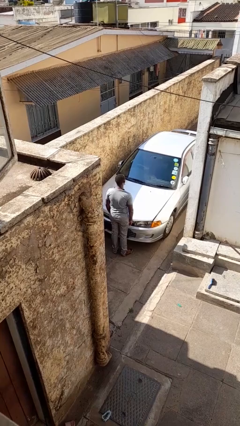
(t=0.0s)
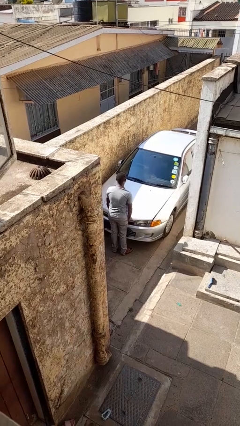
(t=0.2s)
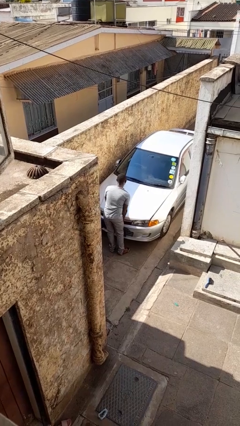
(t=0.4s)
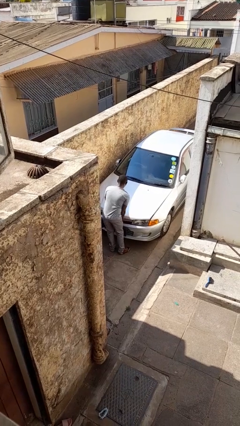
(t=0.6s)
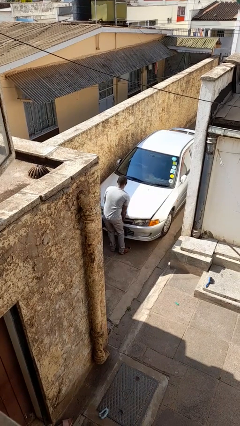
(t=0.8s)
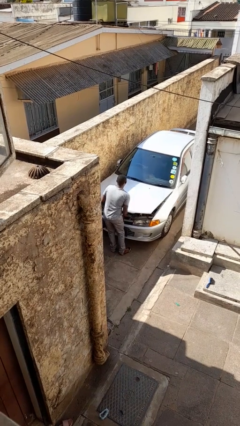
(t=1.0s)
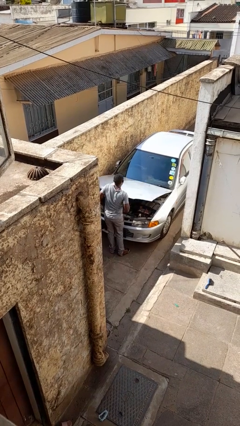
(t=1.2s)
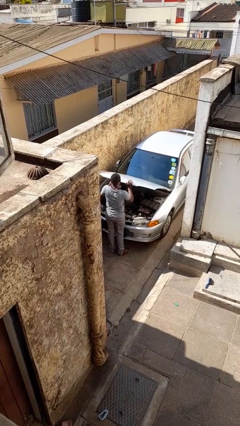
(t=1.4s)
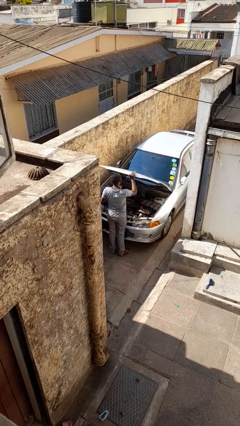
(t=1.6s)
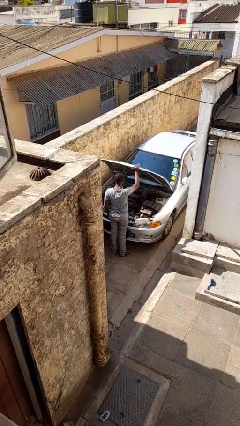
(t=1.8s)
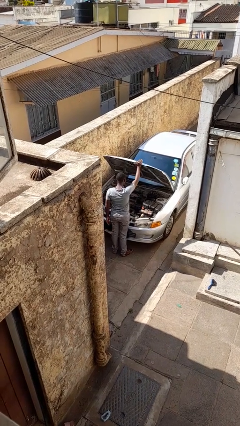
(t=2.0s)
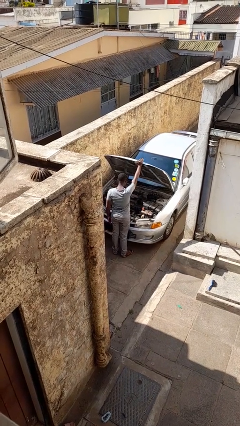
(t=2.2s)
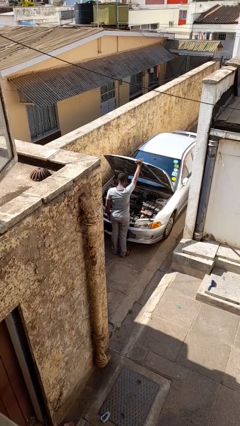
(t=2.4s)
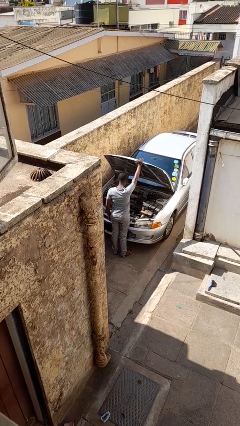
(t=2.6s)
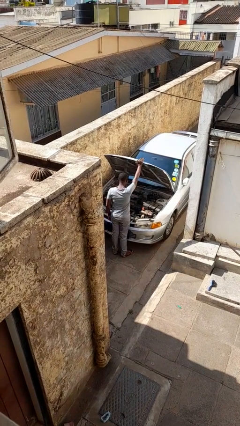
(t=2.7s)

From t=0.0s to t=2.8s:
person opens car hood

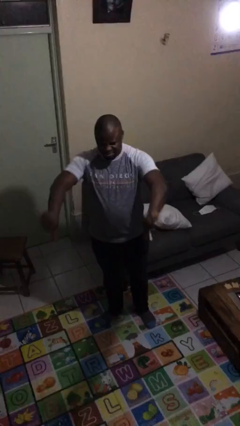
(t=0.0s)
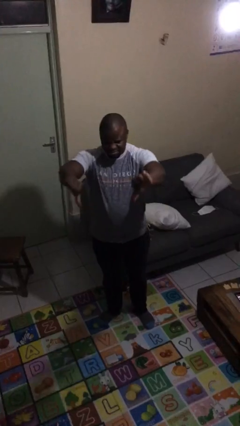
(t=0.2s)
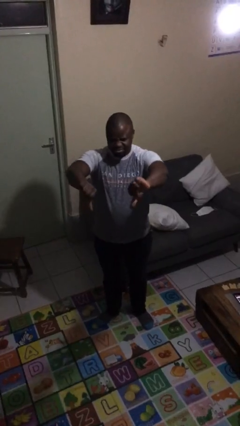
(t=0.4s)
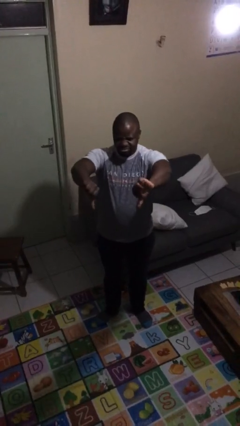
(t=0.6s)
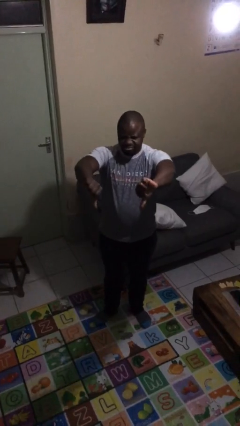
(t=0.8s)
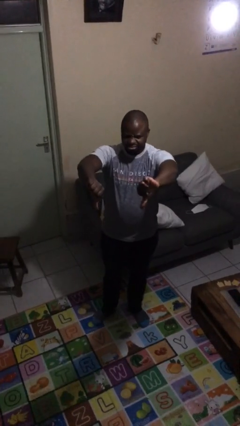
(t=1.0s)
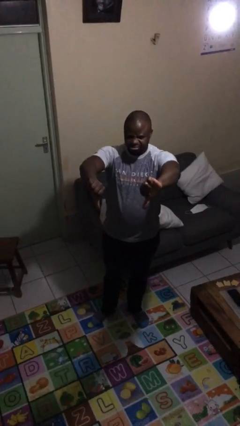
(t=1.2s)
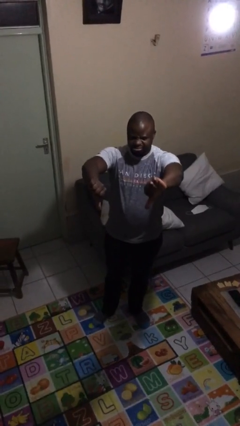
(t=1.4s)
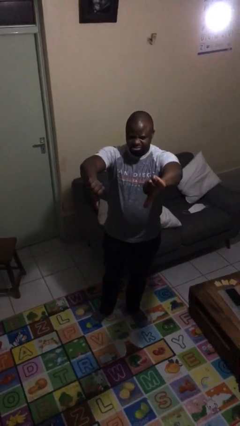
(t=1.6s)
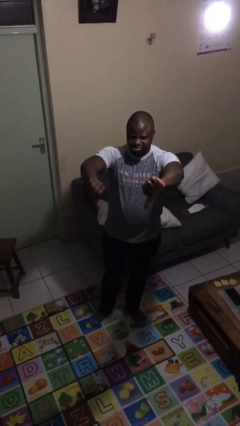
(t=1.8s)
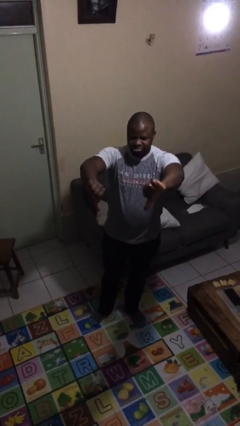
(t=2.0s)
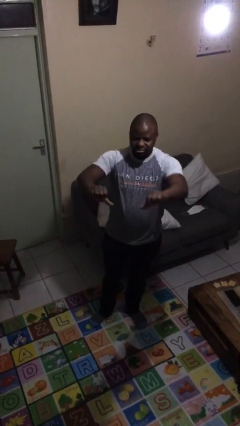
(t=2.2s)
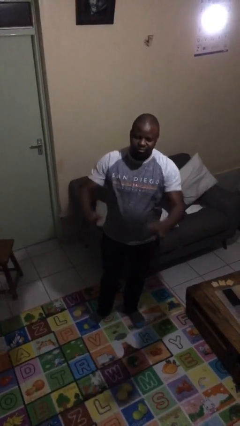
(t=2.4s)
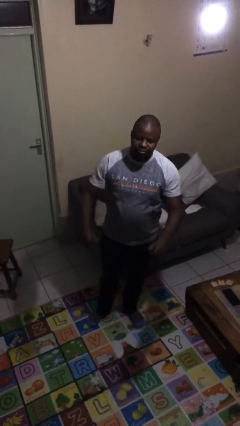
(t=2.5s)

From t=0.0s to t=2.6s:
person gestures thumbs down

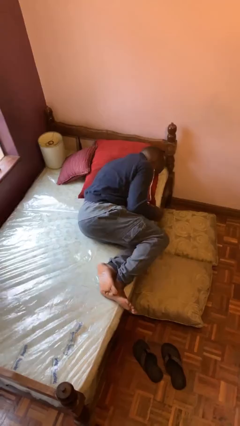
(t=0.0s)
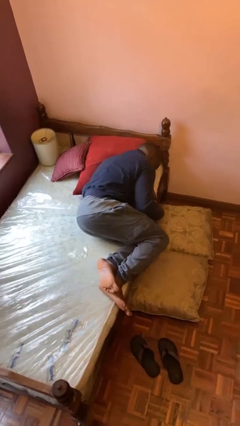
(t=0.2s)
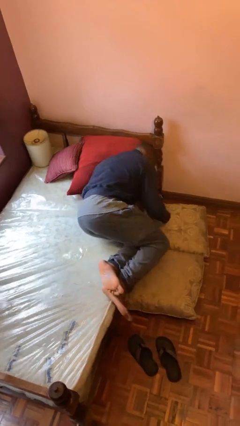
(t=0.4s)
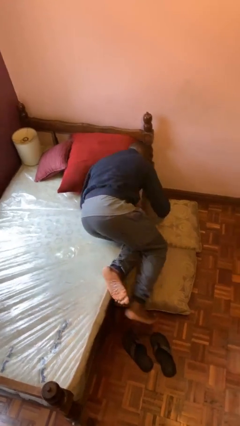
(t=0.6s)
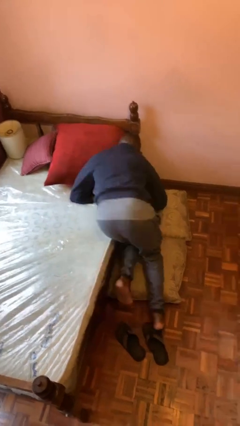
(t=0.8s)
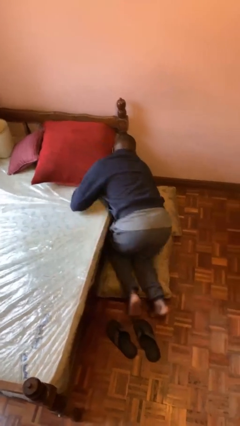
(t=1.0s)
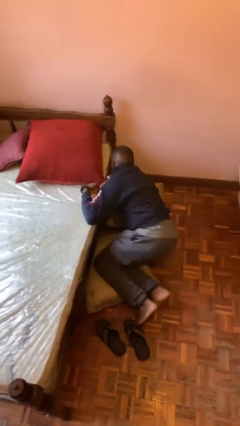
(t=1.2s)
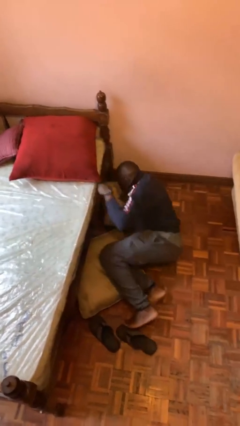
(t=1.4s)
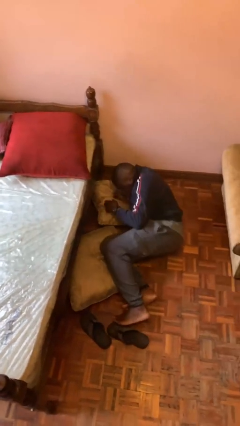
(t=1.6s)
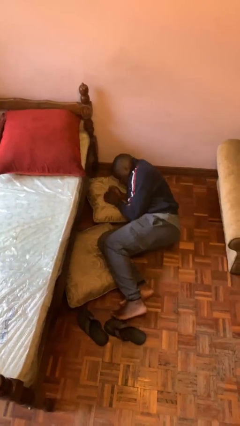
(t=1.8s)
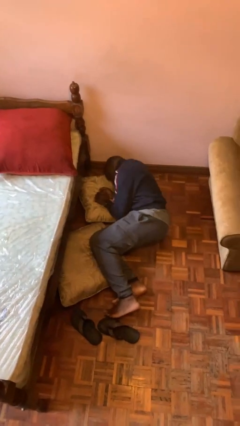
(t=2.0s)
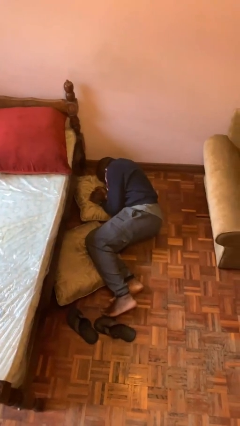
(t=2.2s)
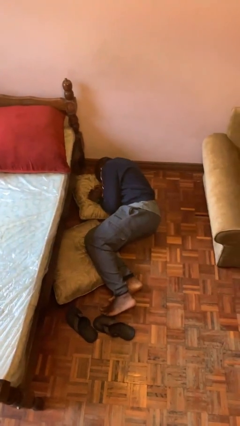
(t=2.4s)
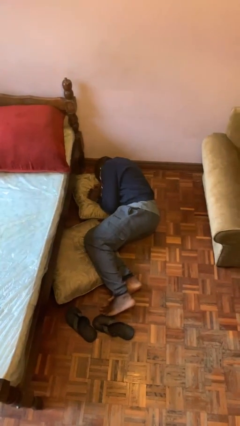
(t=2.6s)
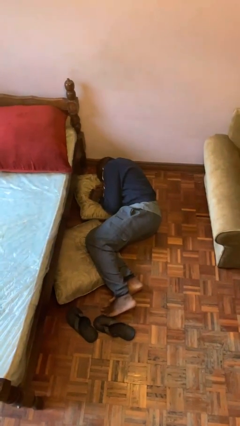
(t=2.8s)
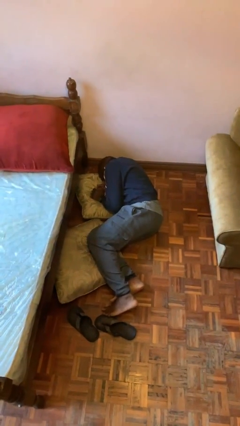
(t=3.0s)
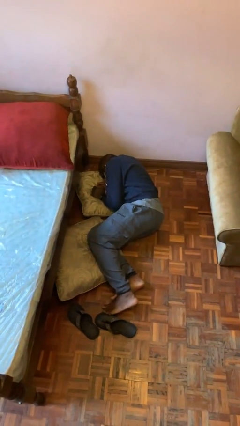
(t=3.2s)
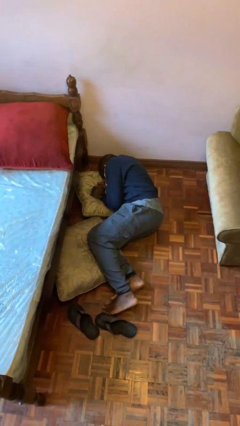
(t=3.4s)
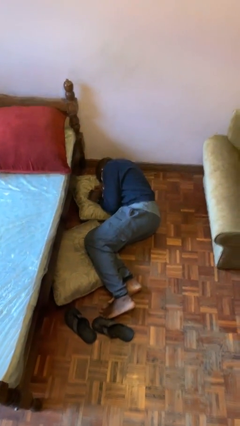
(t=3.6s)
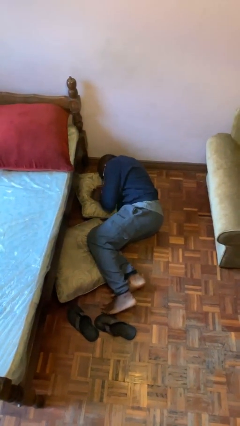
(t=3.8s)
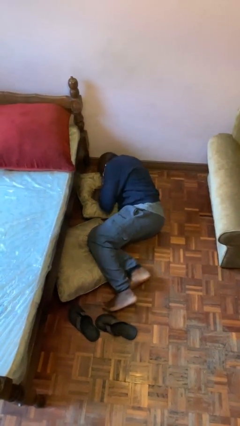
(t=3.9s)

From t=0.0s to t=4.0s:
person falls from bed

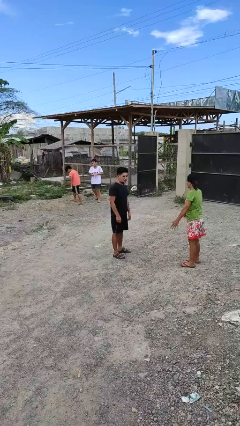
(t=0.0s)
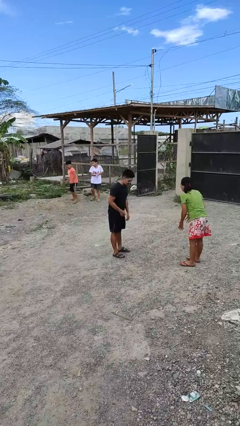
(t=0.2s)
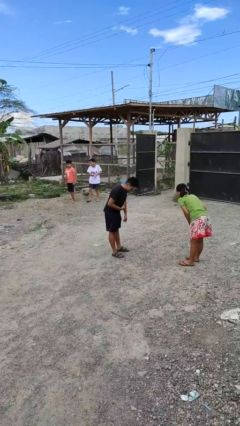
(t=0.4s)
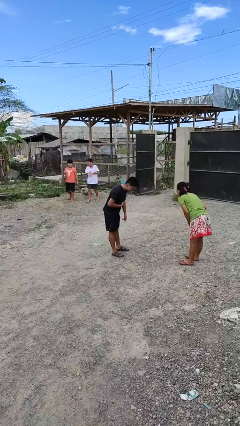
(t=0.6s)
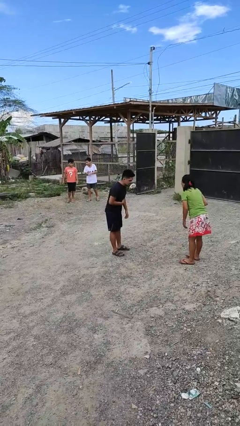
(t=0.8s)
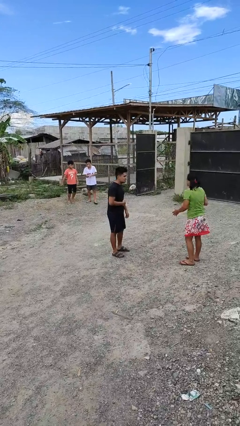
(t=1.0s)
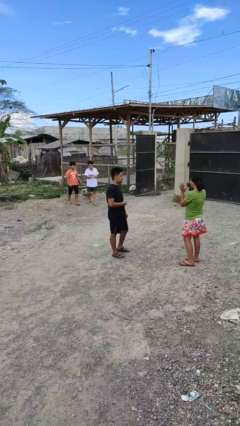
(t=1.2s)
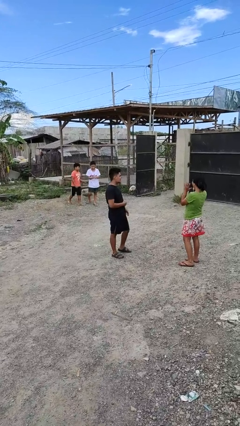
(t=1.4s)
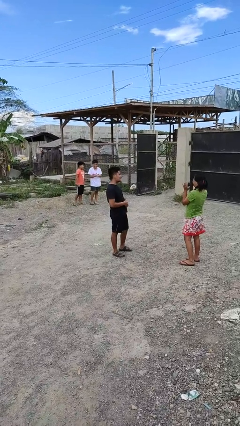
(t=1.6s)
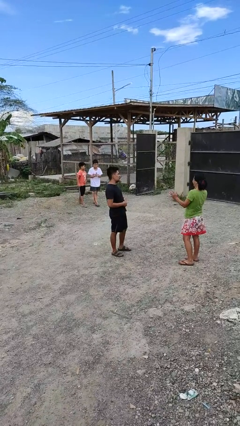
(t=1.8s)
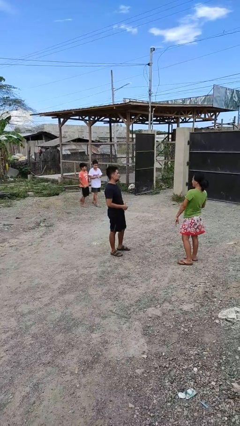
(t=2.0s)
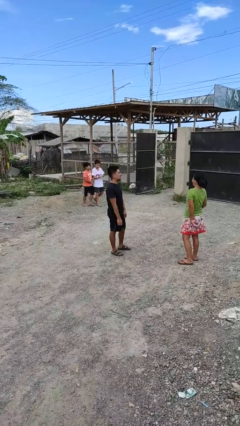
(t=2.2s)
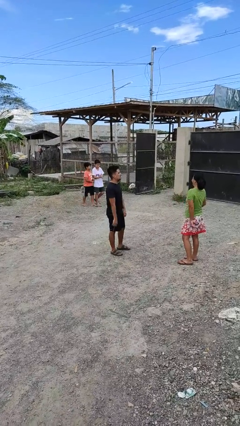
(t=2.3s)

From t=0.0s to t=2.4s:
person laughs with person

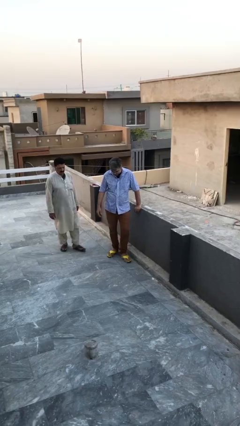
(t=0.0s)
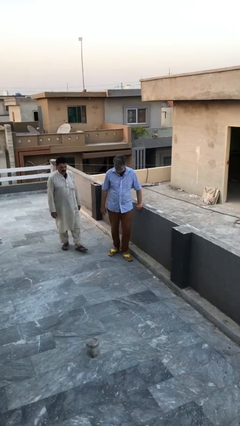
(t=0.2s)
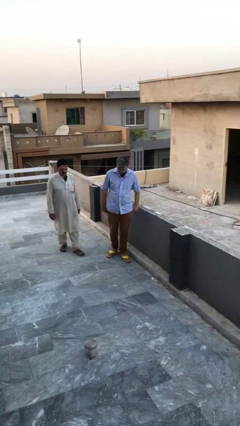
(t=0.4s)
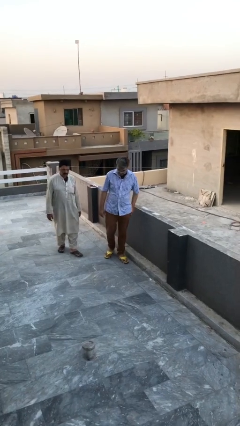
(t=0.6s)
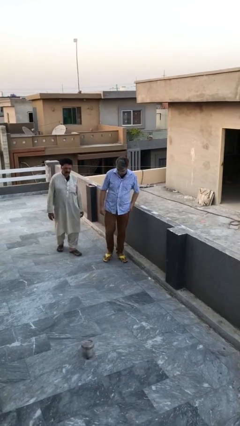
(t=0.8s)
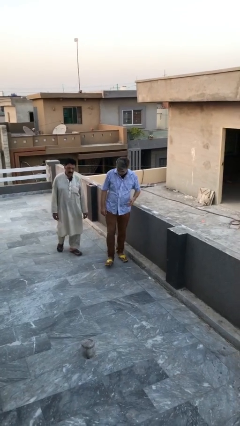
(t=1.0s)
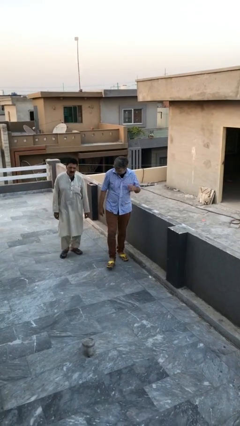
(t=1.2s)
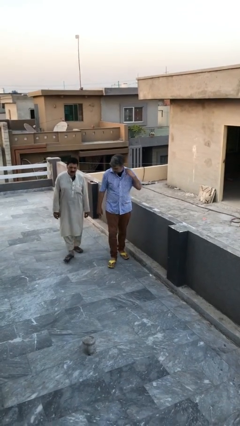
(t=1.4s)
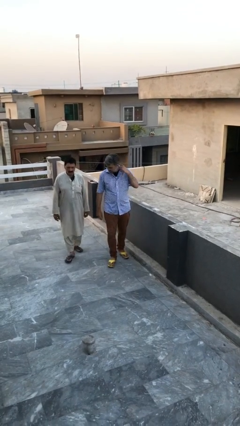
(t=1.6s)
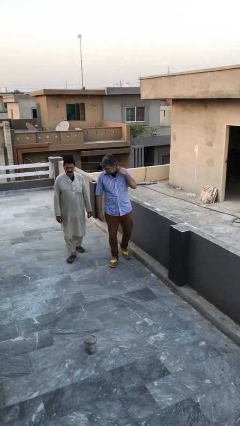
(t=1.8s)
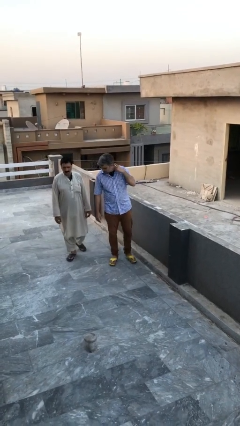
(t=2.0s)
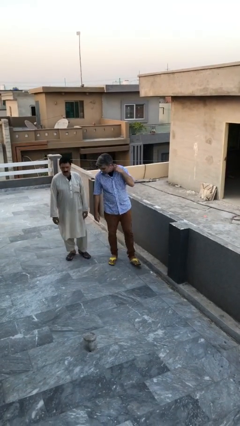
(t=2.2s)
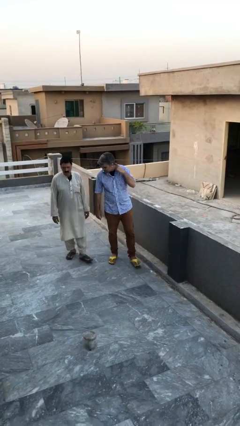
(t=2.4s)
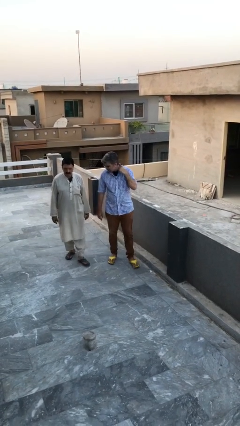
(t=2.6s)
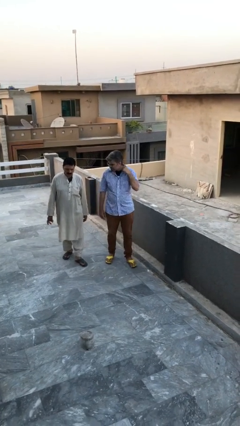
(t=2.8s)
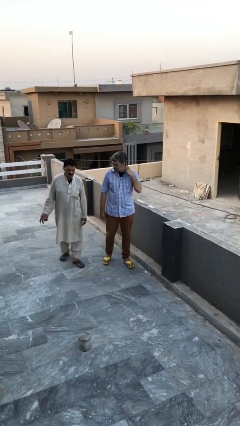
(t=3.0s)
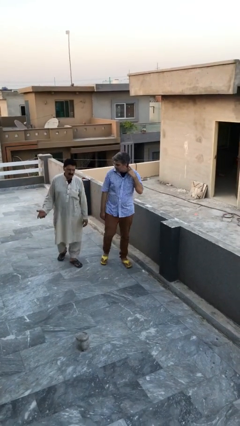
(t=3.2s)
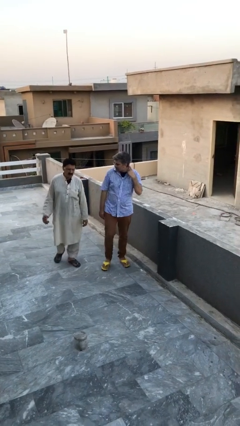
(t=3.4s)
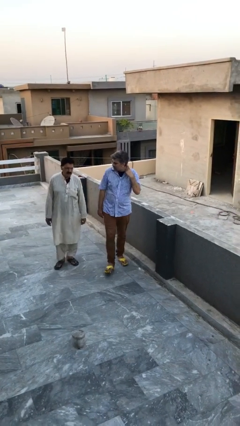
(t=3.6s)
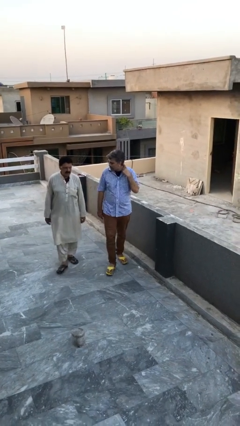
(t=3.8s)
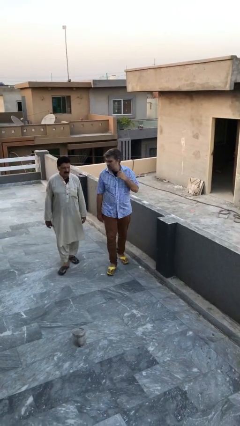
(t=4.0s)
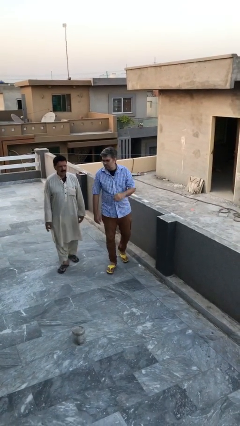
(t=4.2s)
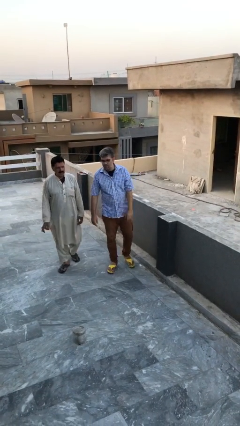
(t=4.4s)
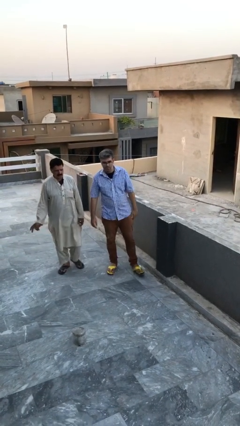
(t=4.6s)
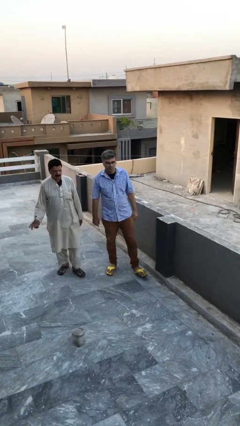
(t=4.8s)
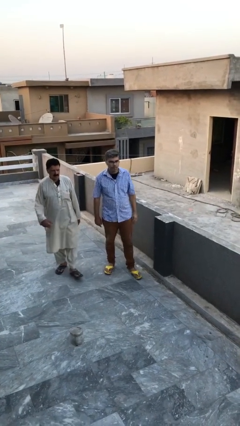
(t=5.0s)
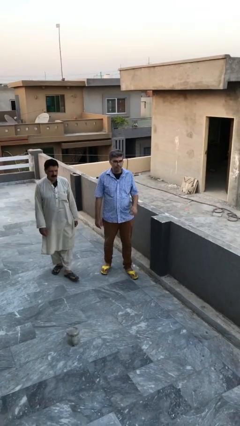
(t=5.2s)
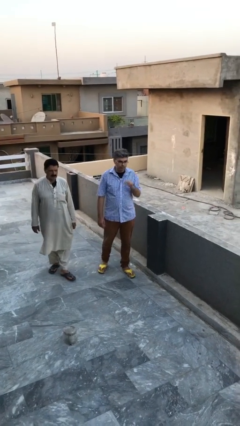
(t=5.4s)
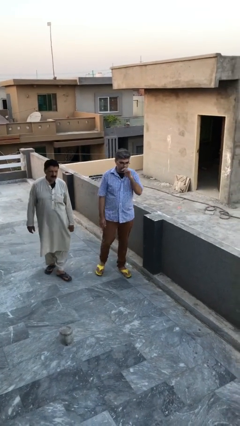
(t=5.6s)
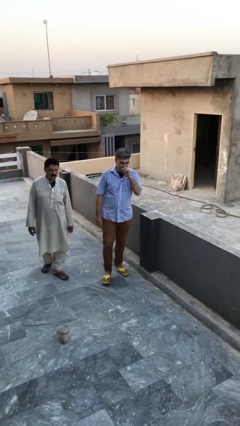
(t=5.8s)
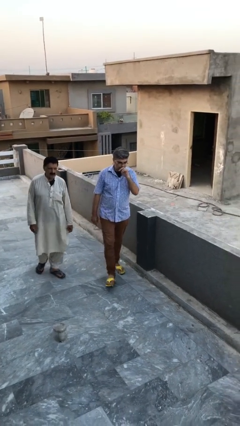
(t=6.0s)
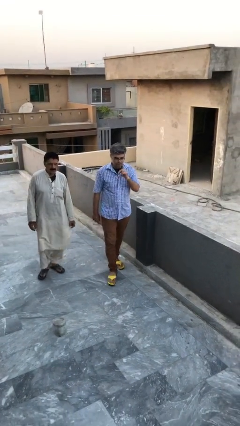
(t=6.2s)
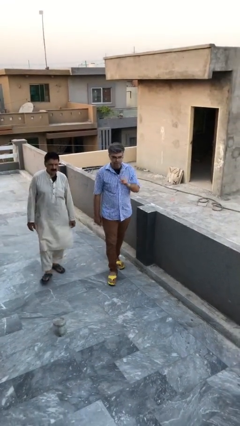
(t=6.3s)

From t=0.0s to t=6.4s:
person talks to person
